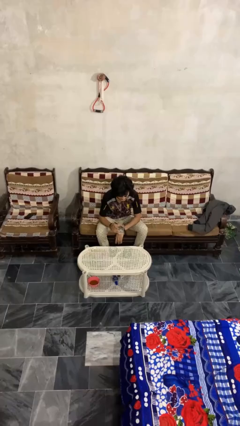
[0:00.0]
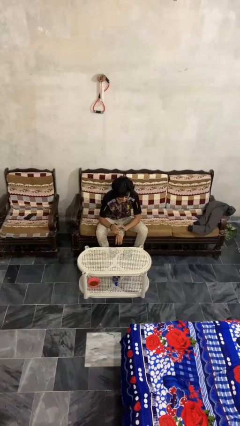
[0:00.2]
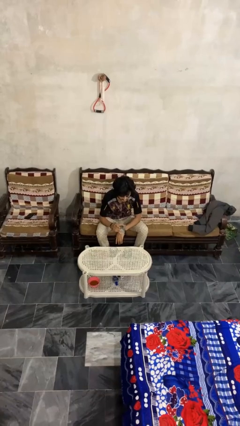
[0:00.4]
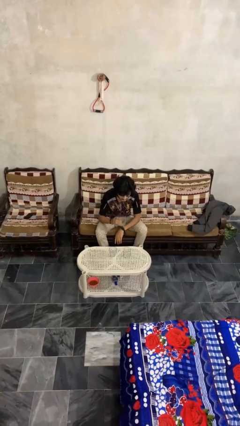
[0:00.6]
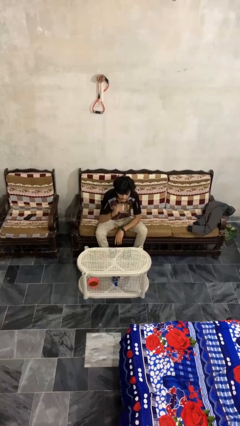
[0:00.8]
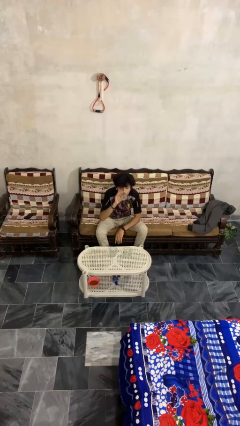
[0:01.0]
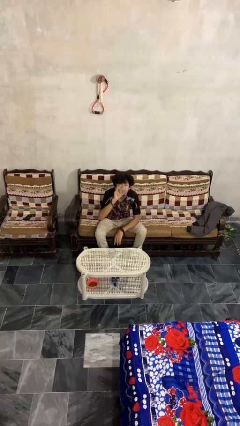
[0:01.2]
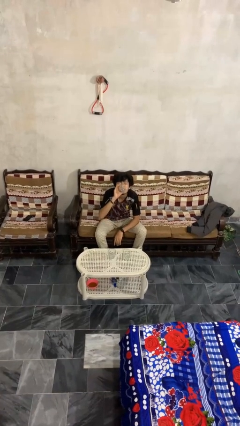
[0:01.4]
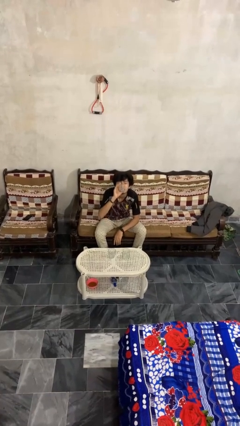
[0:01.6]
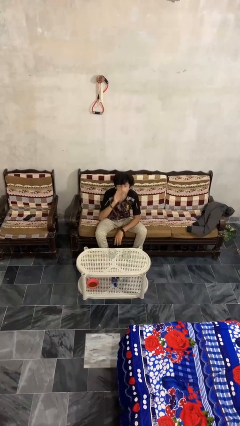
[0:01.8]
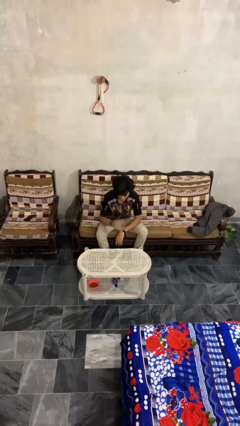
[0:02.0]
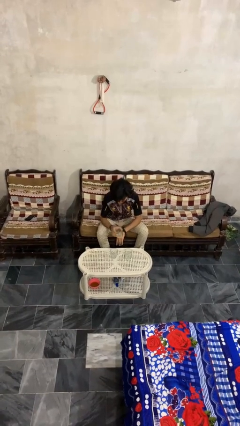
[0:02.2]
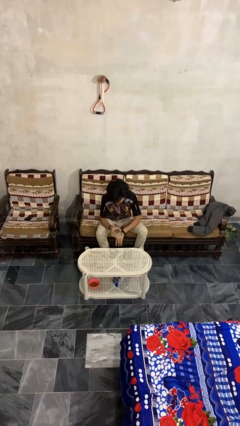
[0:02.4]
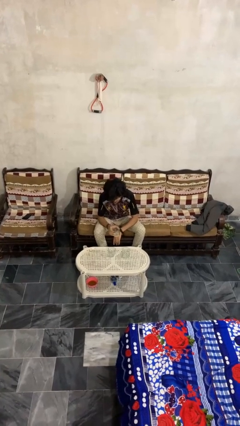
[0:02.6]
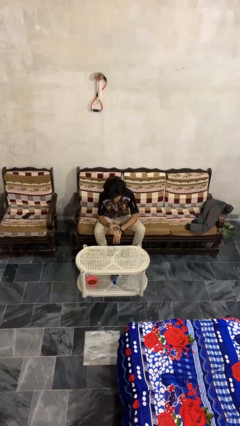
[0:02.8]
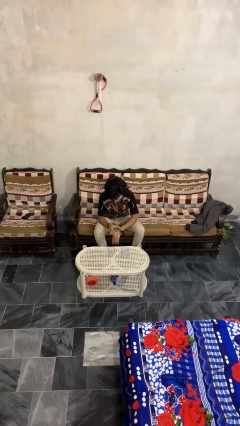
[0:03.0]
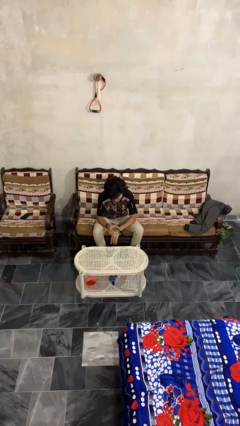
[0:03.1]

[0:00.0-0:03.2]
person drinks from shotglass

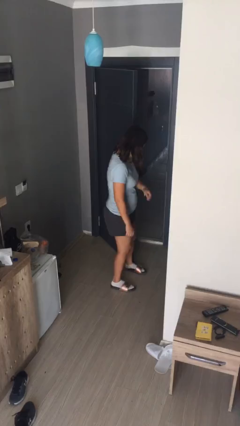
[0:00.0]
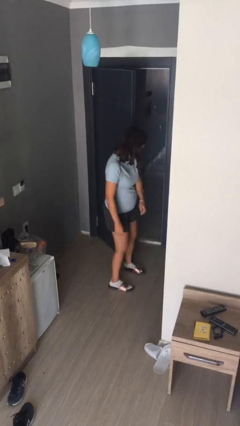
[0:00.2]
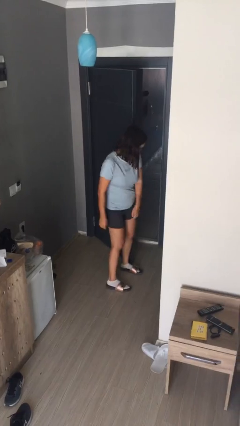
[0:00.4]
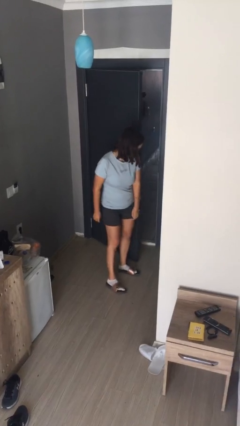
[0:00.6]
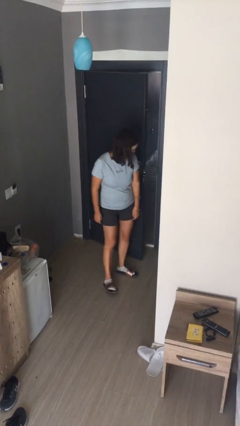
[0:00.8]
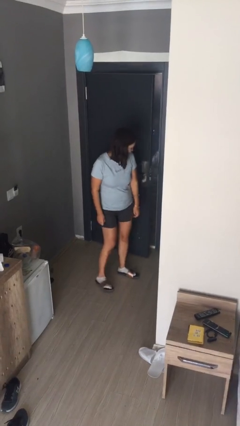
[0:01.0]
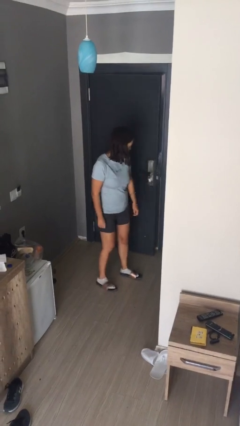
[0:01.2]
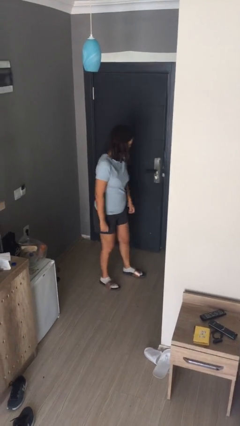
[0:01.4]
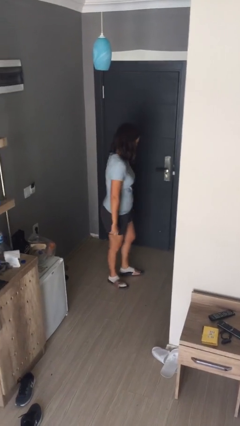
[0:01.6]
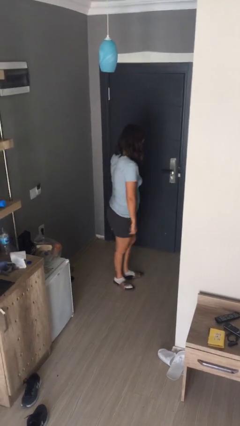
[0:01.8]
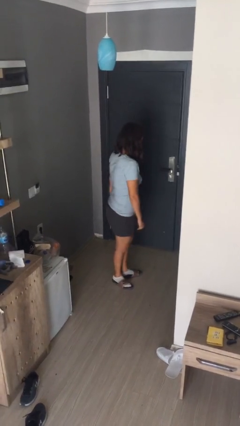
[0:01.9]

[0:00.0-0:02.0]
person closes door with hip

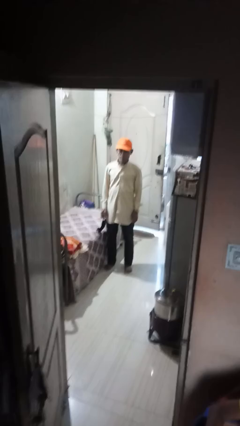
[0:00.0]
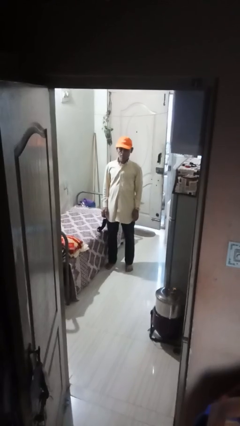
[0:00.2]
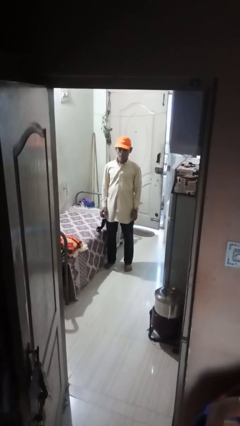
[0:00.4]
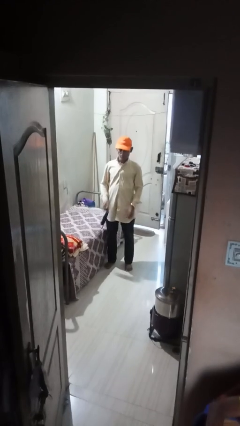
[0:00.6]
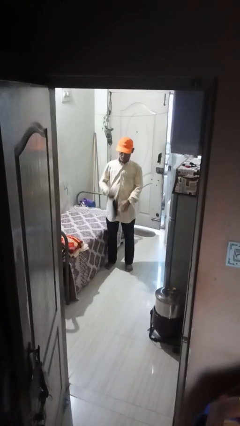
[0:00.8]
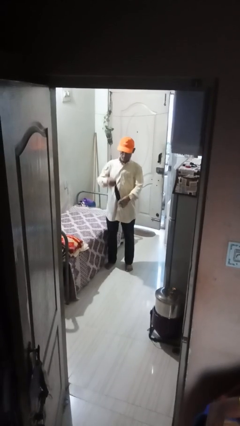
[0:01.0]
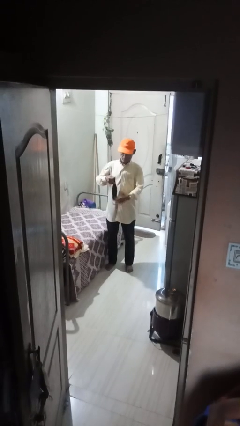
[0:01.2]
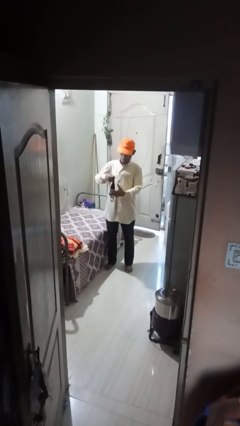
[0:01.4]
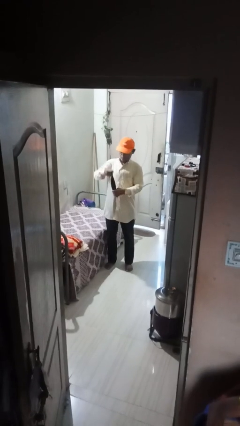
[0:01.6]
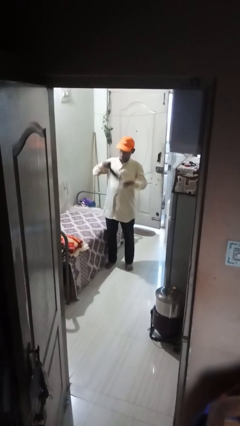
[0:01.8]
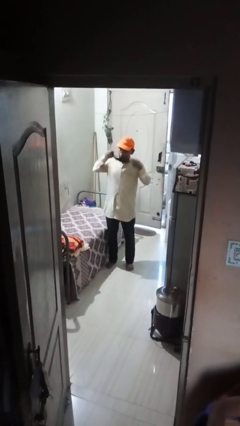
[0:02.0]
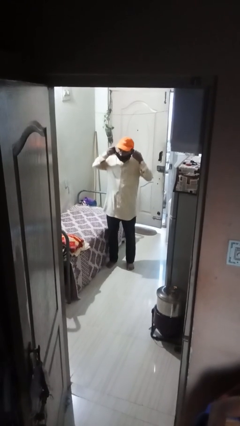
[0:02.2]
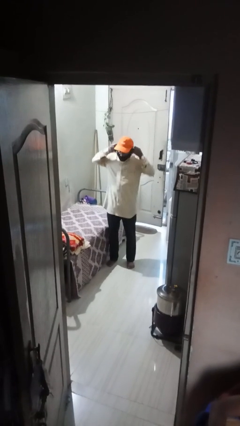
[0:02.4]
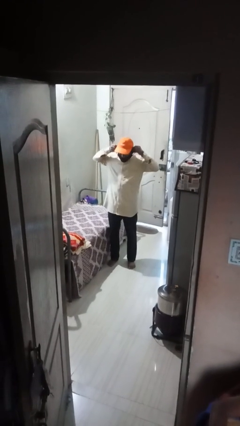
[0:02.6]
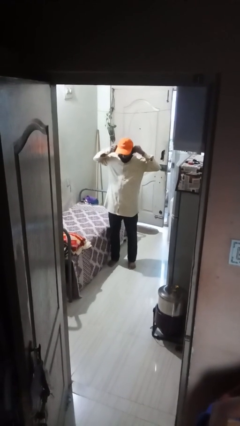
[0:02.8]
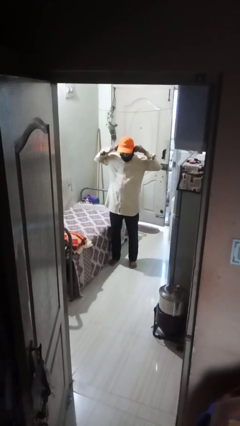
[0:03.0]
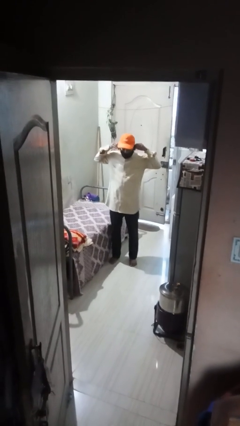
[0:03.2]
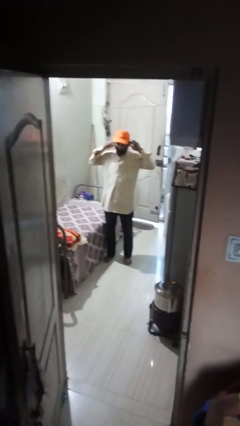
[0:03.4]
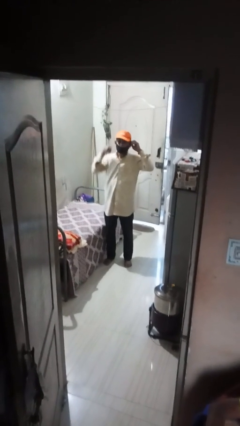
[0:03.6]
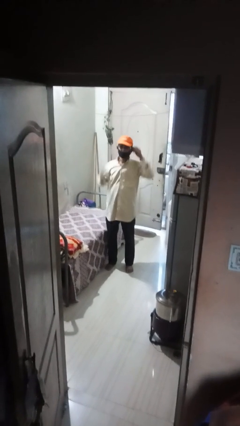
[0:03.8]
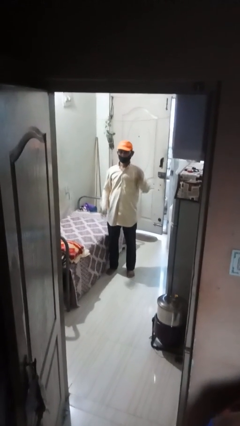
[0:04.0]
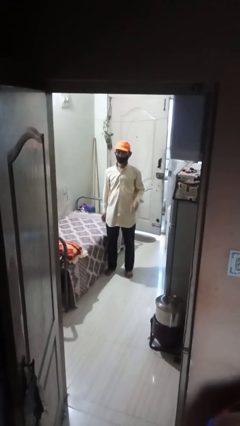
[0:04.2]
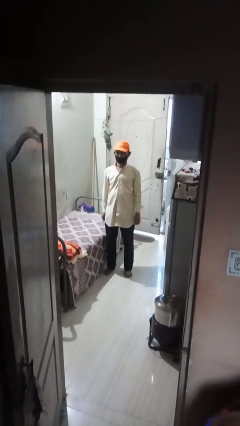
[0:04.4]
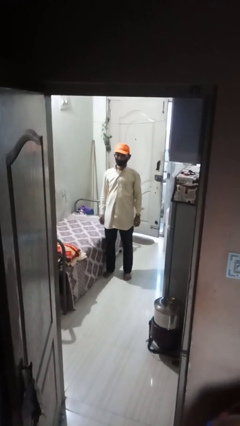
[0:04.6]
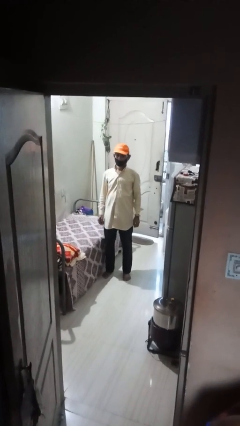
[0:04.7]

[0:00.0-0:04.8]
person puts on facemask

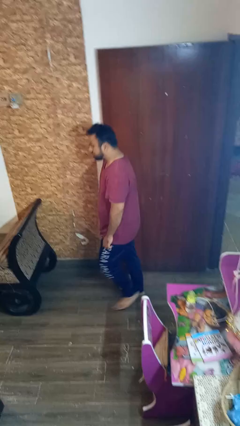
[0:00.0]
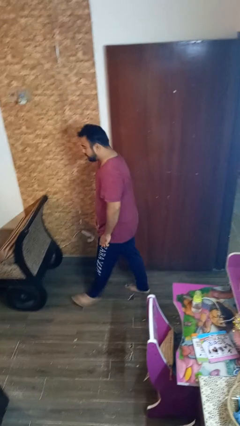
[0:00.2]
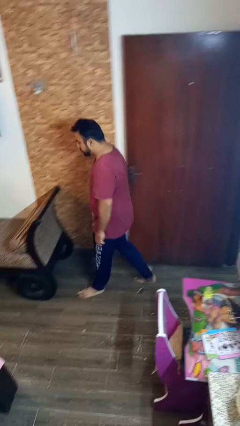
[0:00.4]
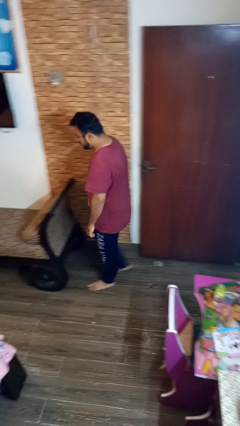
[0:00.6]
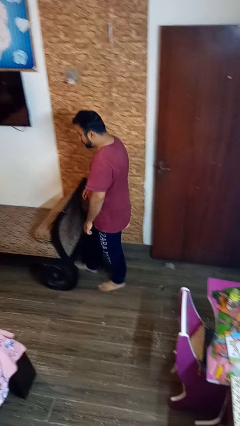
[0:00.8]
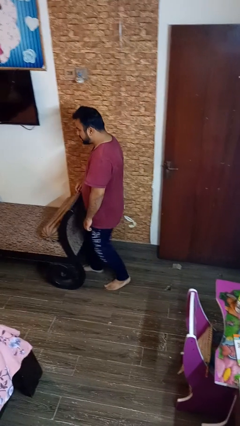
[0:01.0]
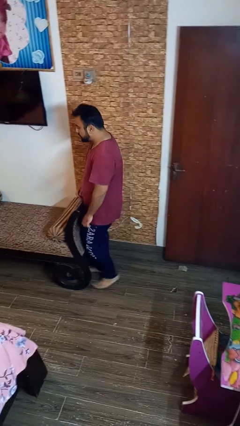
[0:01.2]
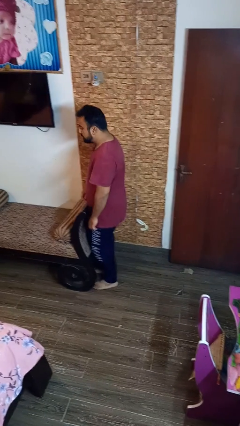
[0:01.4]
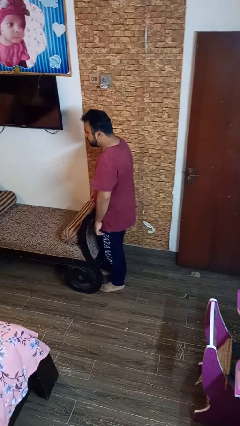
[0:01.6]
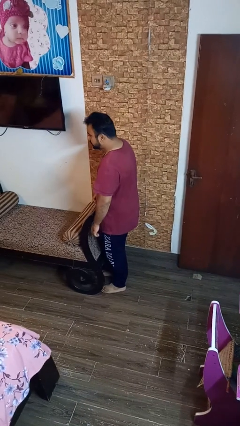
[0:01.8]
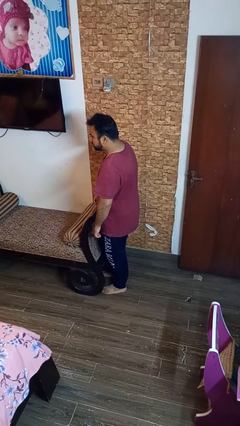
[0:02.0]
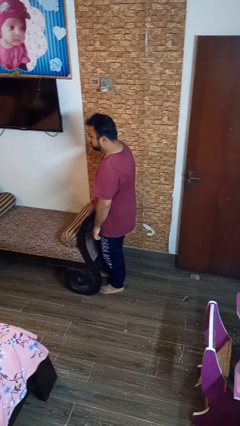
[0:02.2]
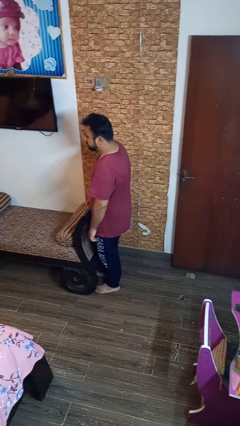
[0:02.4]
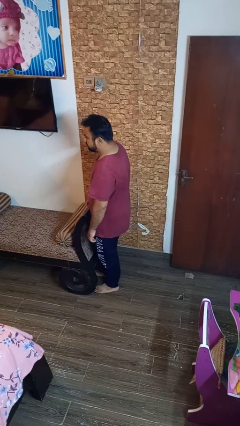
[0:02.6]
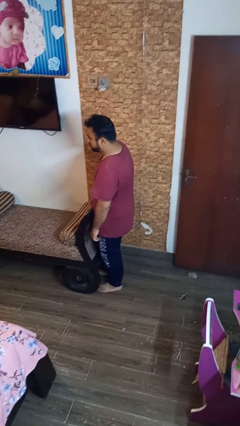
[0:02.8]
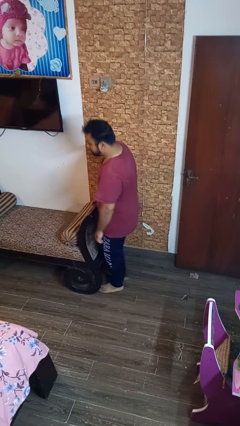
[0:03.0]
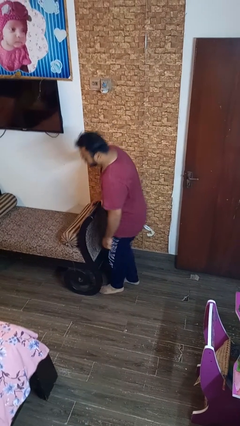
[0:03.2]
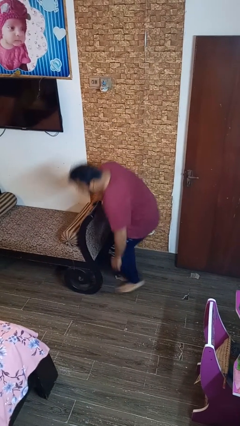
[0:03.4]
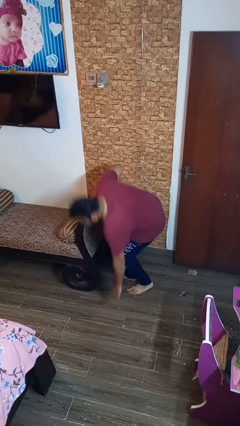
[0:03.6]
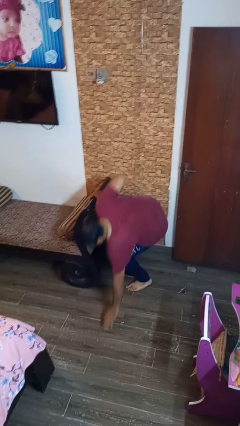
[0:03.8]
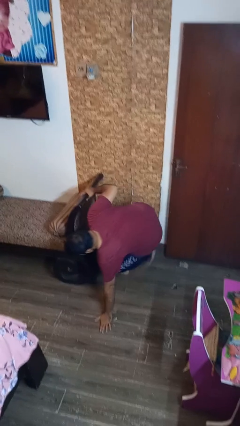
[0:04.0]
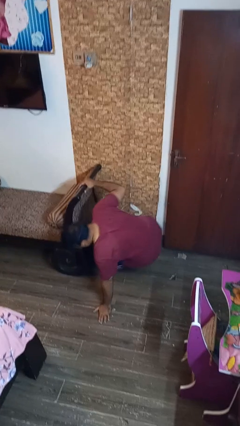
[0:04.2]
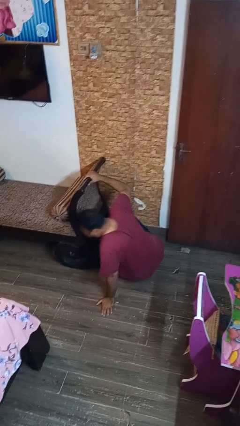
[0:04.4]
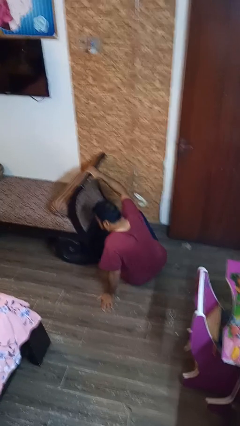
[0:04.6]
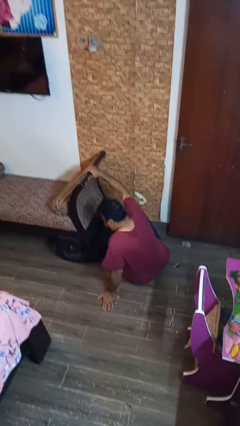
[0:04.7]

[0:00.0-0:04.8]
person trips on object on floor

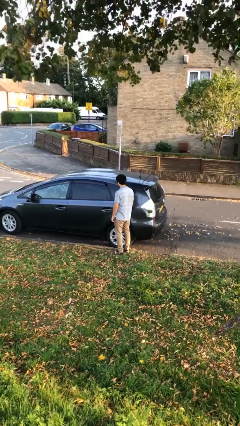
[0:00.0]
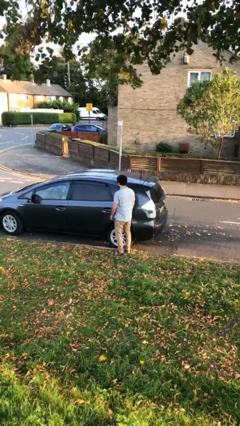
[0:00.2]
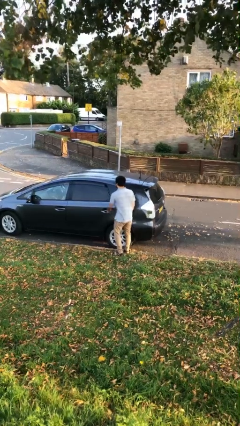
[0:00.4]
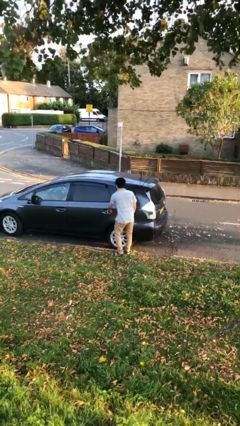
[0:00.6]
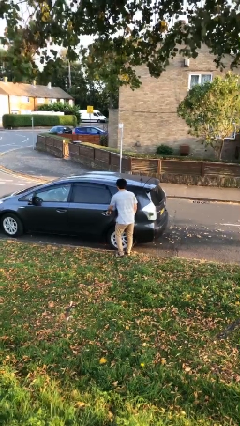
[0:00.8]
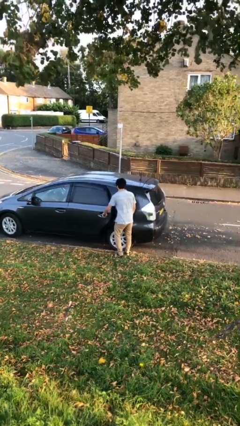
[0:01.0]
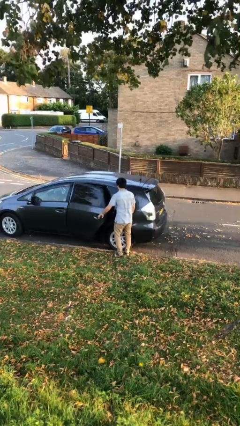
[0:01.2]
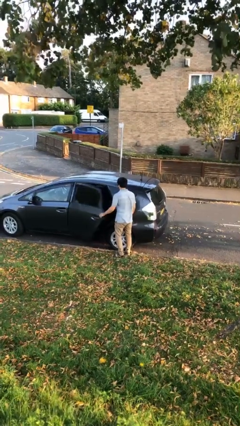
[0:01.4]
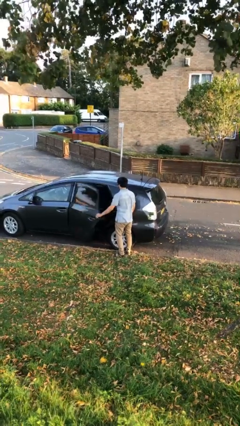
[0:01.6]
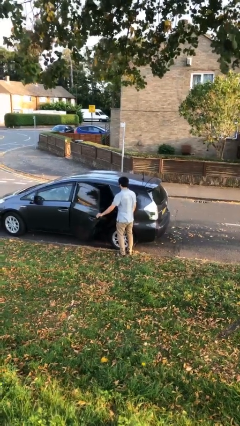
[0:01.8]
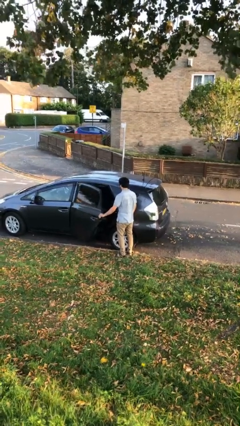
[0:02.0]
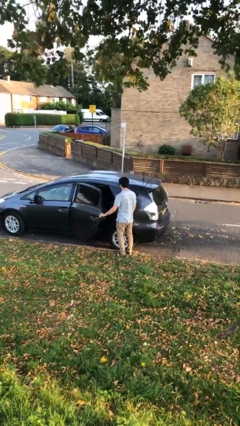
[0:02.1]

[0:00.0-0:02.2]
person opens car door
